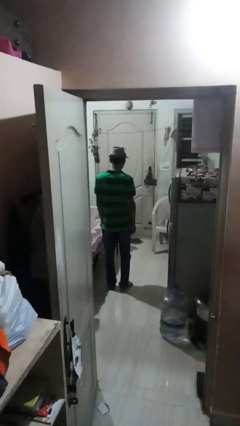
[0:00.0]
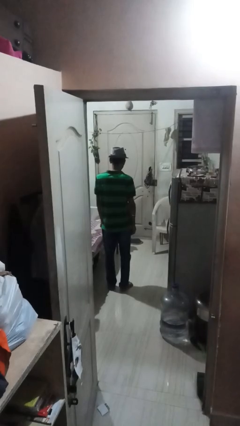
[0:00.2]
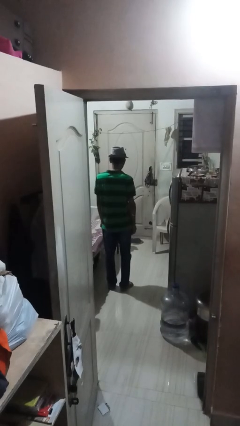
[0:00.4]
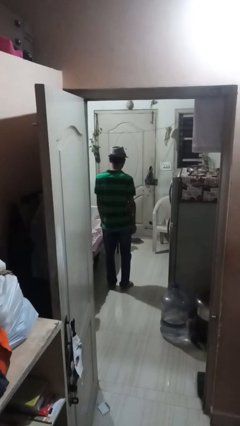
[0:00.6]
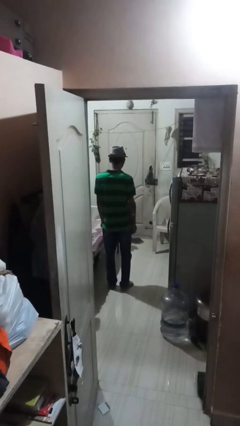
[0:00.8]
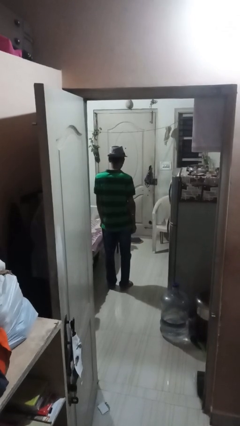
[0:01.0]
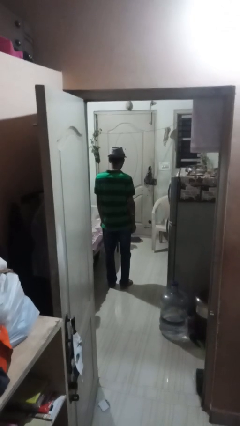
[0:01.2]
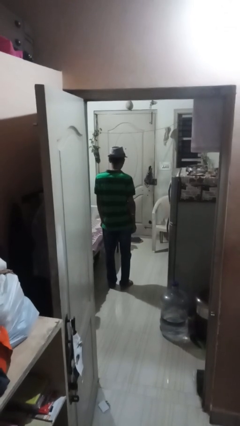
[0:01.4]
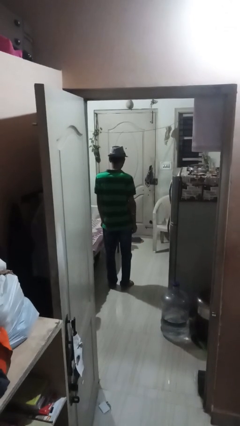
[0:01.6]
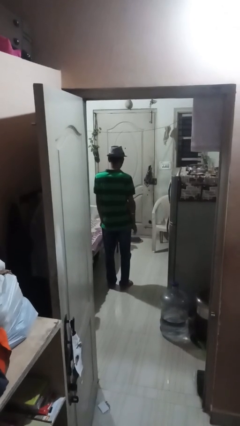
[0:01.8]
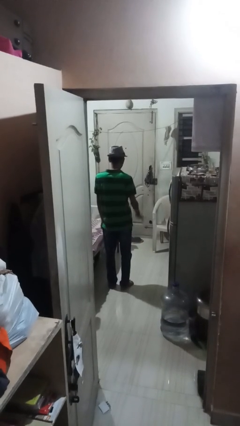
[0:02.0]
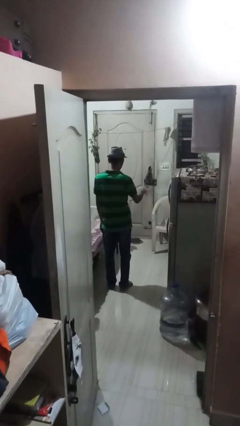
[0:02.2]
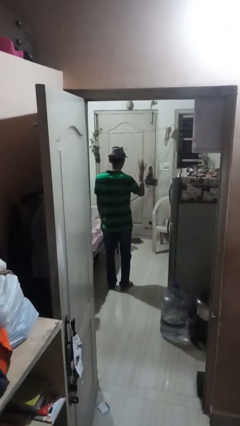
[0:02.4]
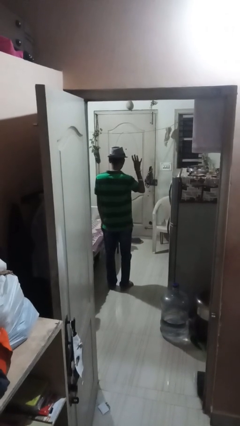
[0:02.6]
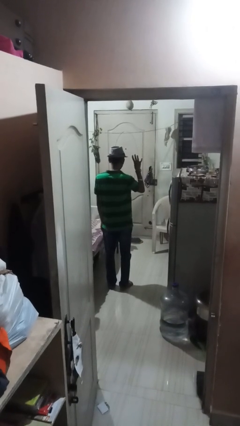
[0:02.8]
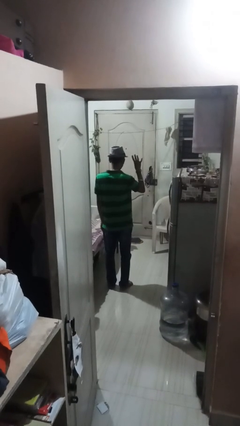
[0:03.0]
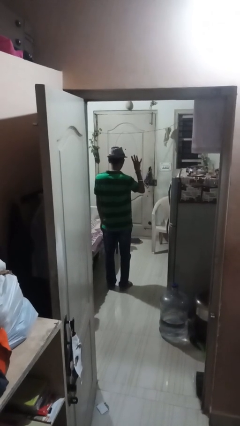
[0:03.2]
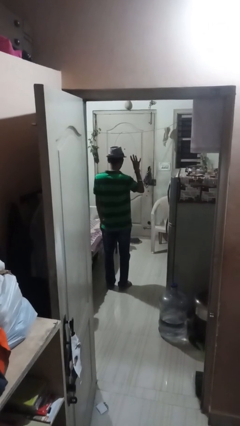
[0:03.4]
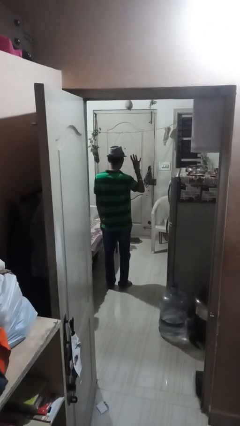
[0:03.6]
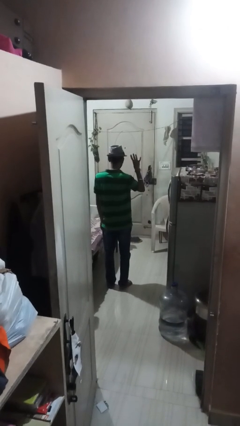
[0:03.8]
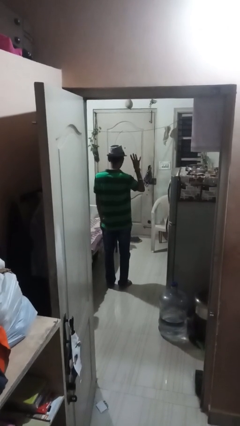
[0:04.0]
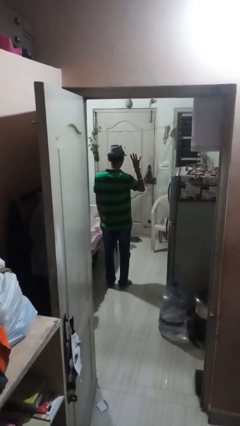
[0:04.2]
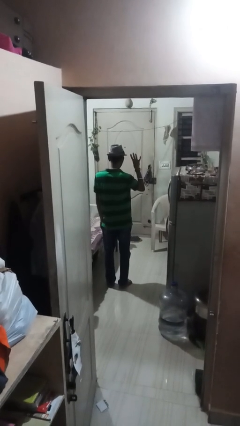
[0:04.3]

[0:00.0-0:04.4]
person gestures number four

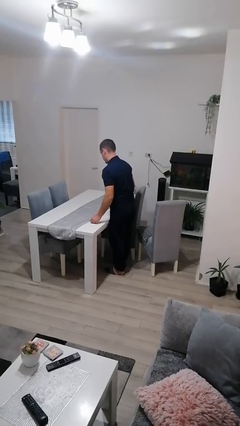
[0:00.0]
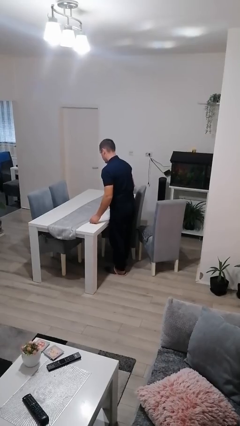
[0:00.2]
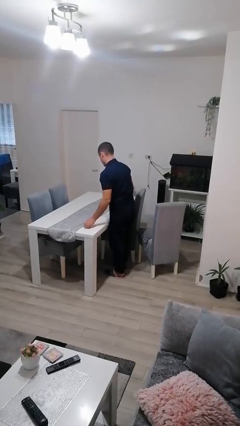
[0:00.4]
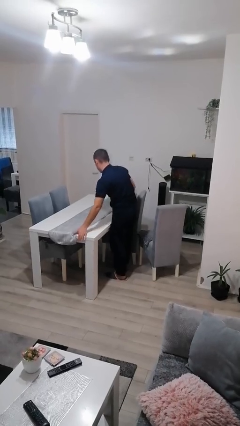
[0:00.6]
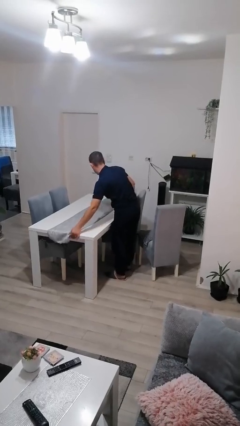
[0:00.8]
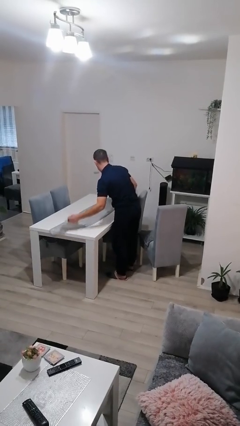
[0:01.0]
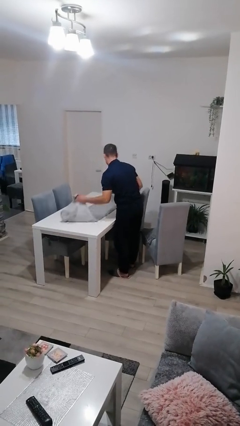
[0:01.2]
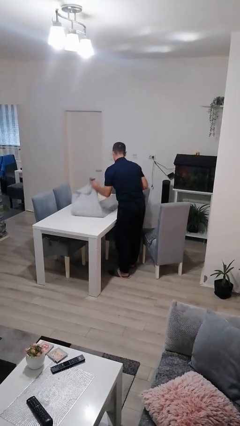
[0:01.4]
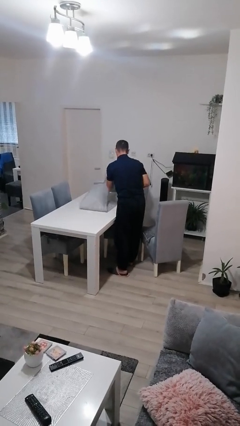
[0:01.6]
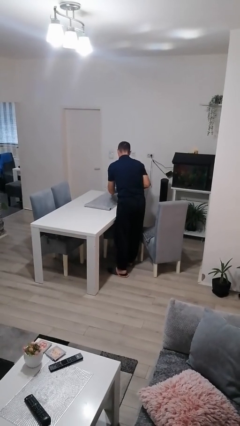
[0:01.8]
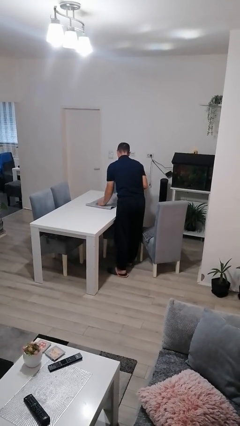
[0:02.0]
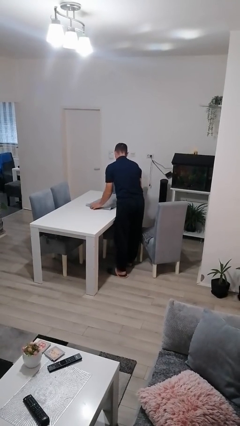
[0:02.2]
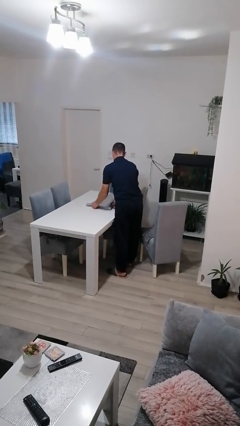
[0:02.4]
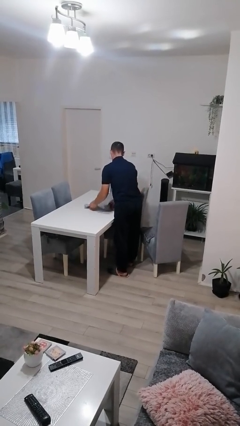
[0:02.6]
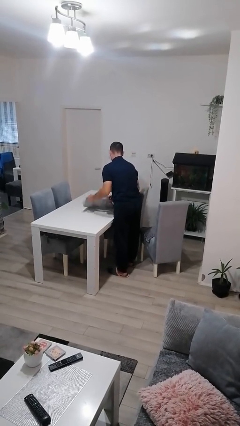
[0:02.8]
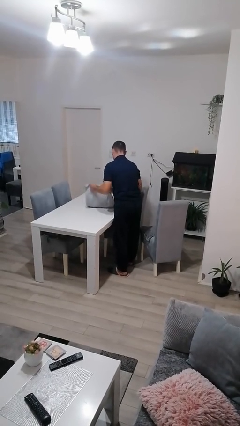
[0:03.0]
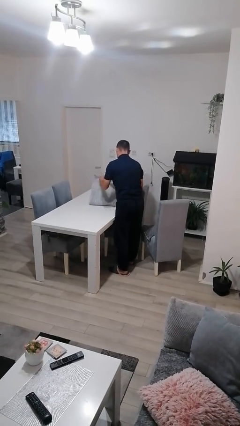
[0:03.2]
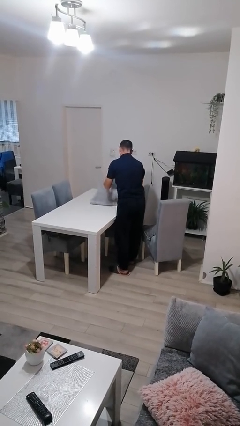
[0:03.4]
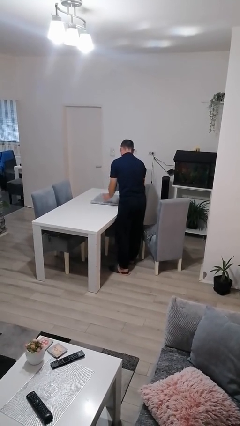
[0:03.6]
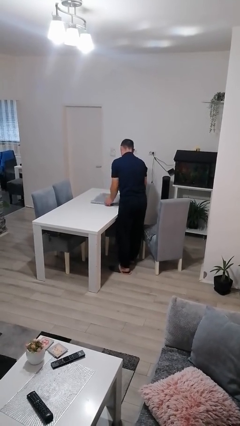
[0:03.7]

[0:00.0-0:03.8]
person folds tablecloth

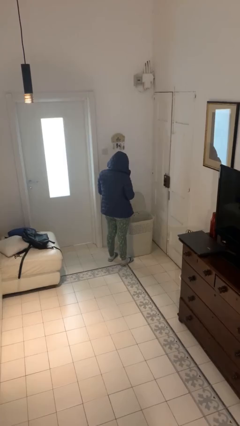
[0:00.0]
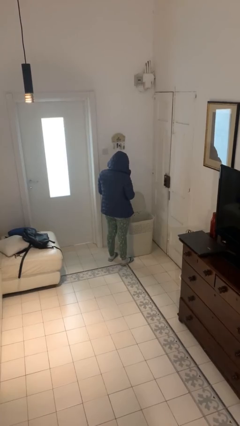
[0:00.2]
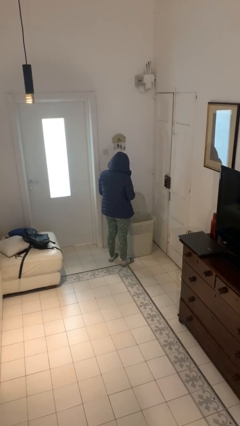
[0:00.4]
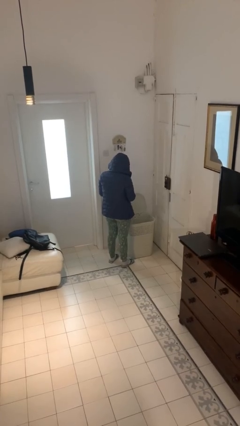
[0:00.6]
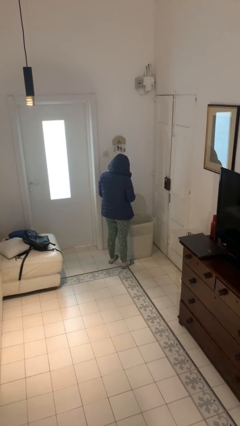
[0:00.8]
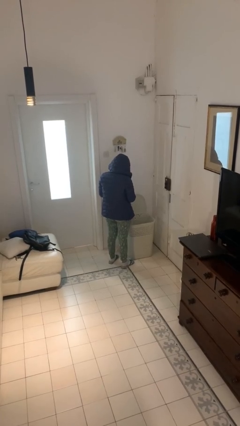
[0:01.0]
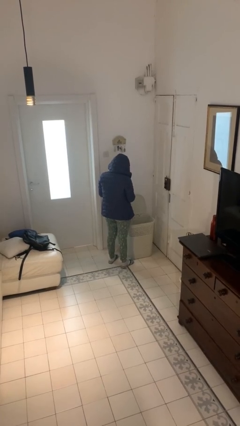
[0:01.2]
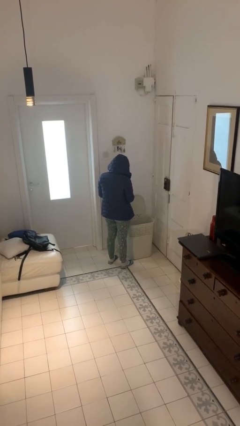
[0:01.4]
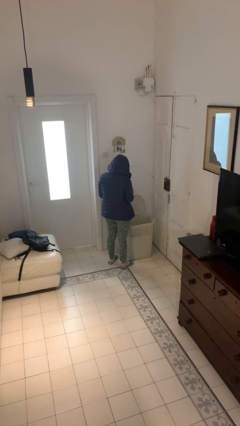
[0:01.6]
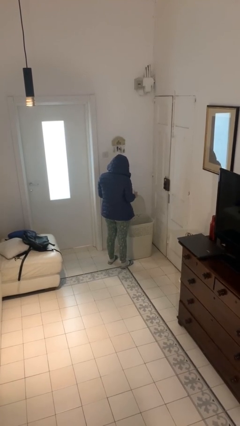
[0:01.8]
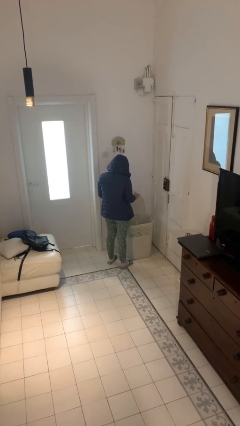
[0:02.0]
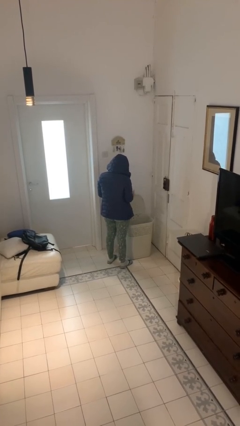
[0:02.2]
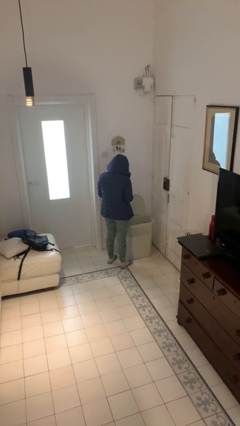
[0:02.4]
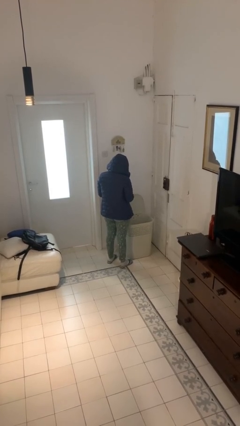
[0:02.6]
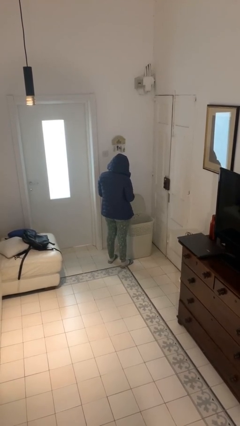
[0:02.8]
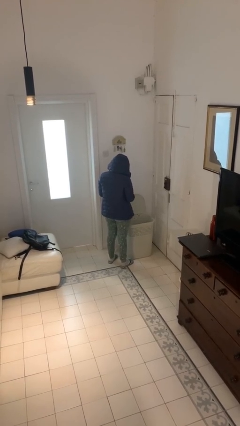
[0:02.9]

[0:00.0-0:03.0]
person discards trash

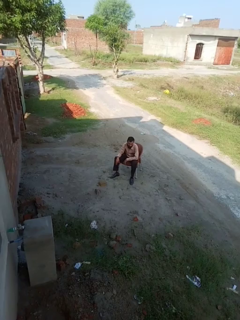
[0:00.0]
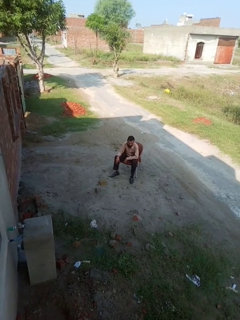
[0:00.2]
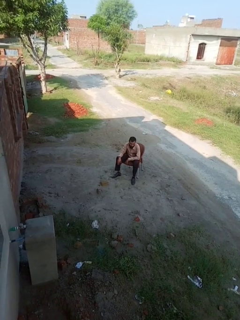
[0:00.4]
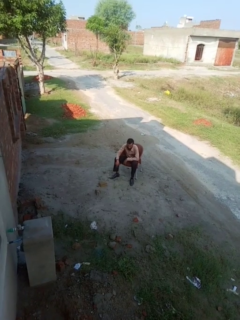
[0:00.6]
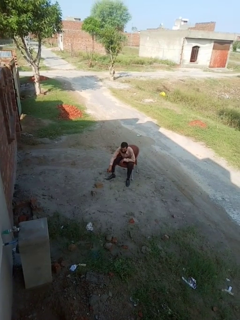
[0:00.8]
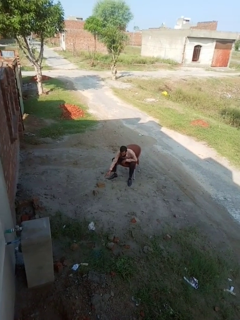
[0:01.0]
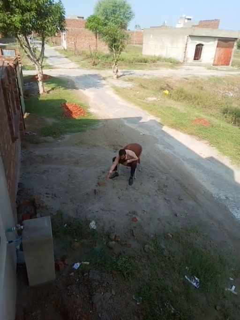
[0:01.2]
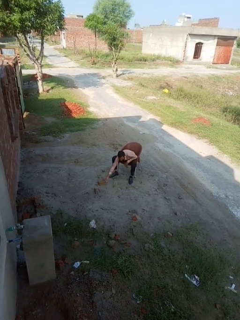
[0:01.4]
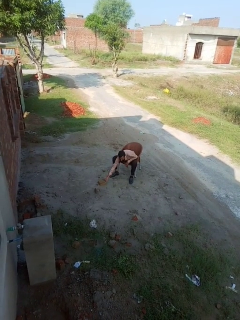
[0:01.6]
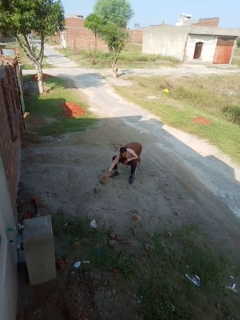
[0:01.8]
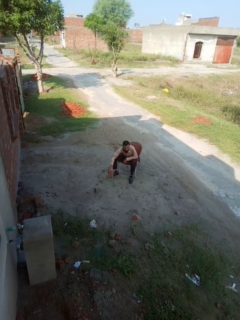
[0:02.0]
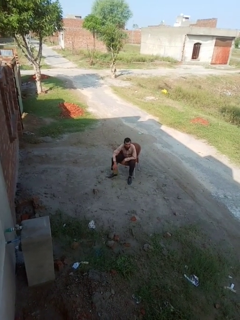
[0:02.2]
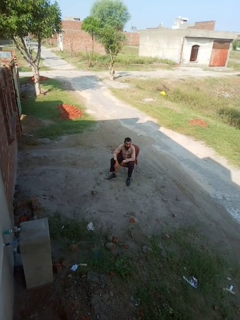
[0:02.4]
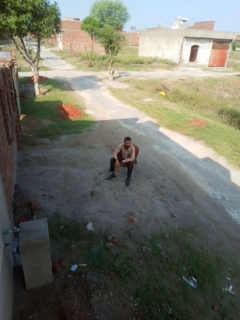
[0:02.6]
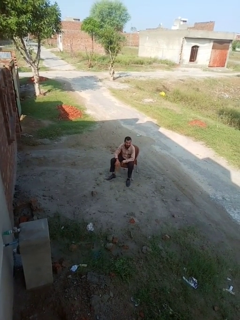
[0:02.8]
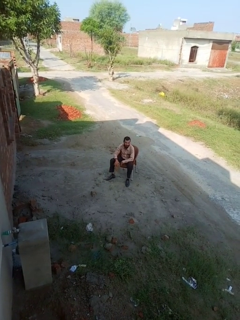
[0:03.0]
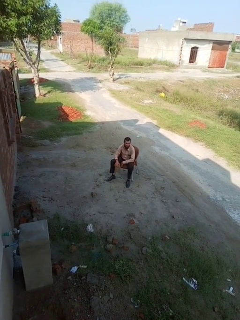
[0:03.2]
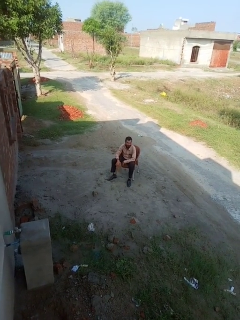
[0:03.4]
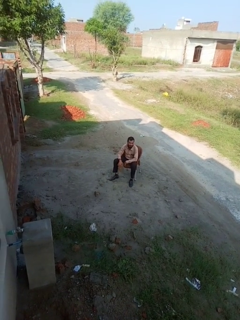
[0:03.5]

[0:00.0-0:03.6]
person picks up object from floor

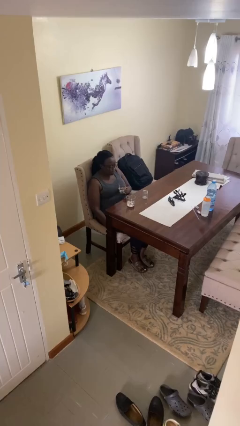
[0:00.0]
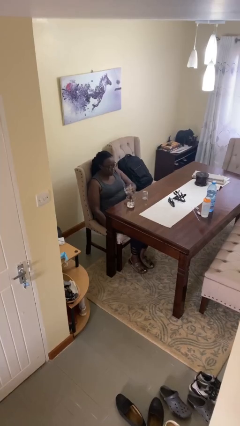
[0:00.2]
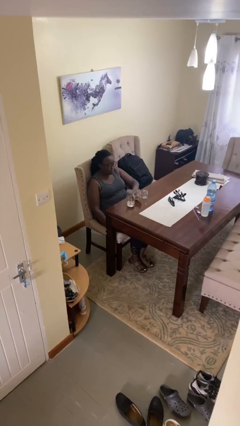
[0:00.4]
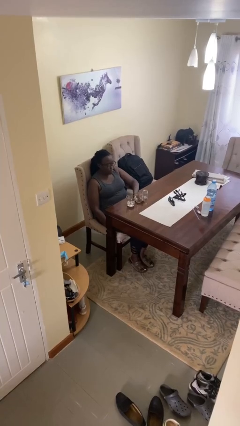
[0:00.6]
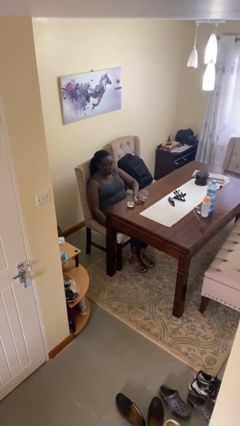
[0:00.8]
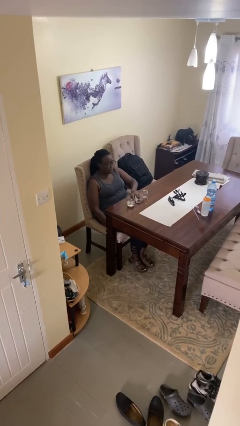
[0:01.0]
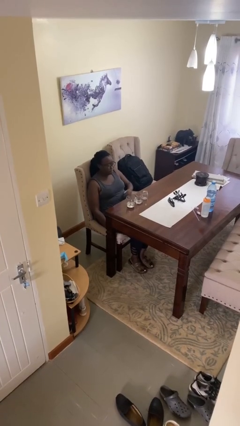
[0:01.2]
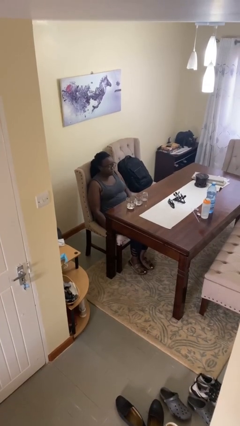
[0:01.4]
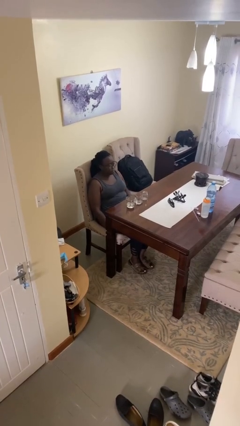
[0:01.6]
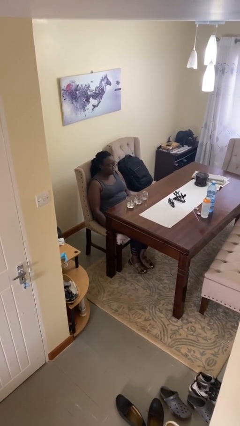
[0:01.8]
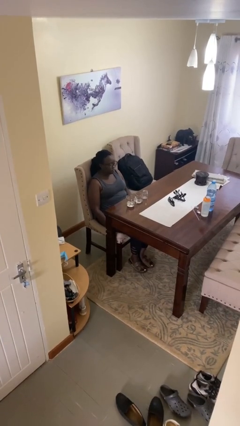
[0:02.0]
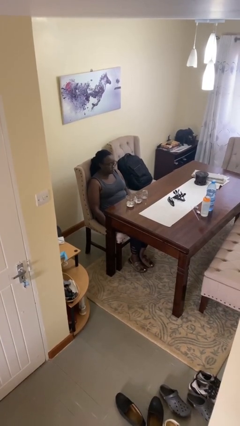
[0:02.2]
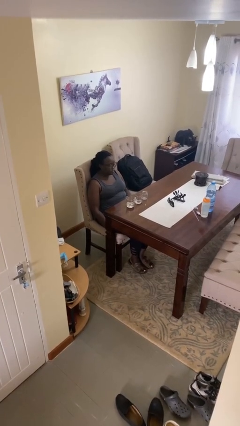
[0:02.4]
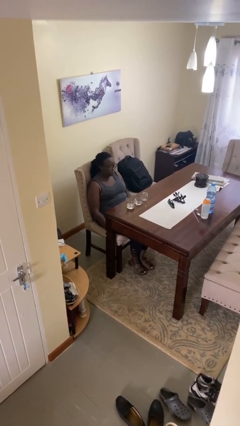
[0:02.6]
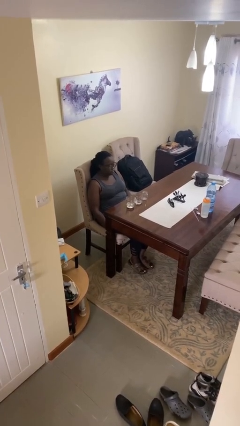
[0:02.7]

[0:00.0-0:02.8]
person puts down object on table

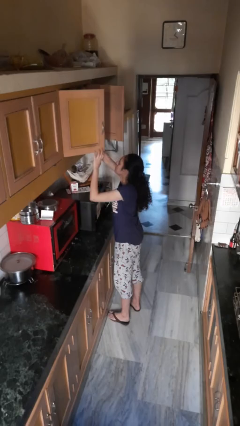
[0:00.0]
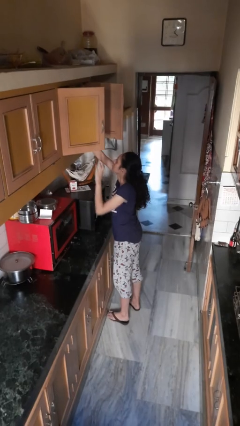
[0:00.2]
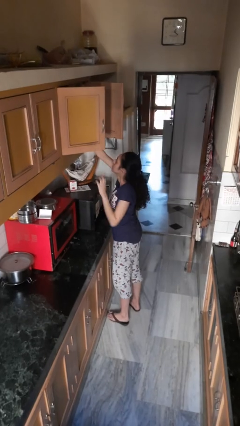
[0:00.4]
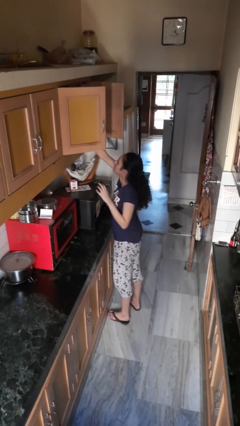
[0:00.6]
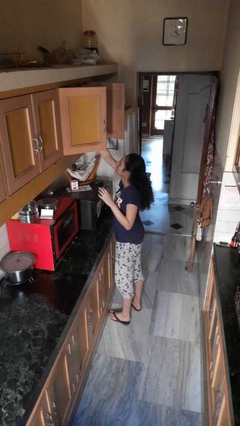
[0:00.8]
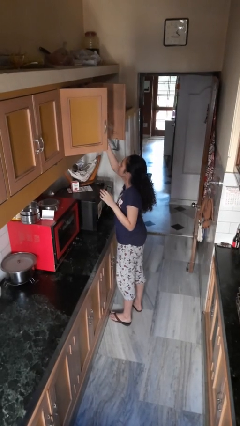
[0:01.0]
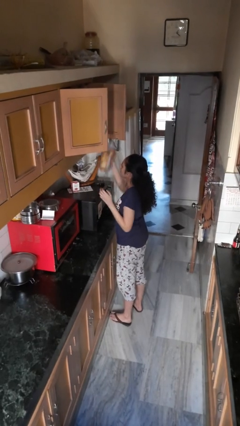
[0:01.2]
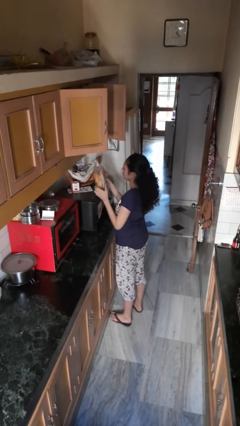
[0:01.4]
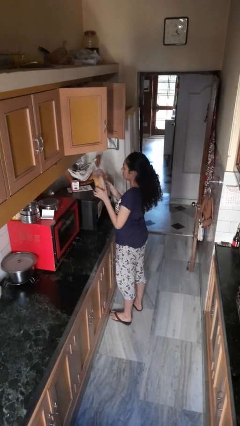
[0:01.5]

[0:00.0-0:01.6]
person takes object from cabinet
